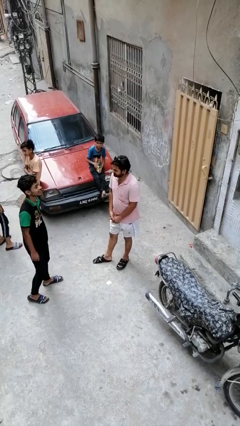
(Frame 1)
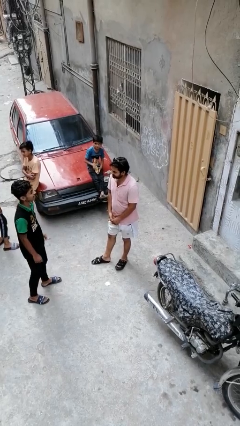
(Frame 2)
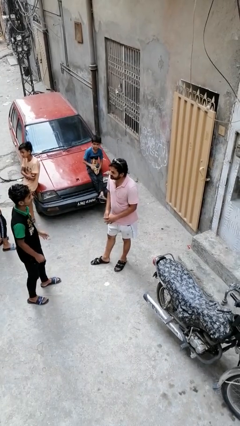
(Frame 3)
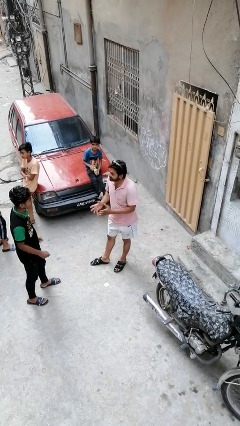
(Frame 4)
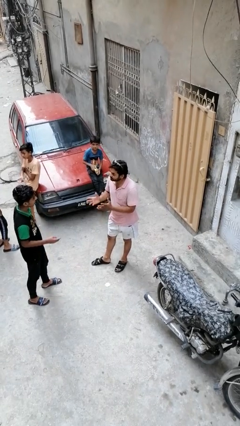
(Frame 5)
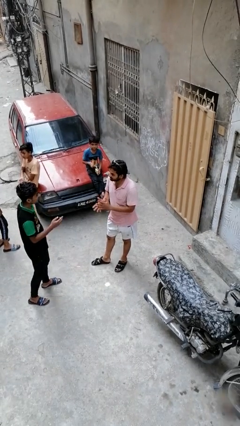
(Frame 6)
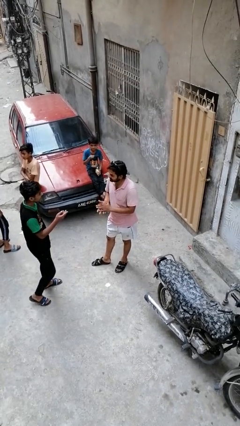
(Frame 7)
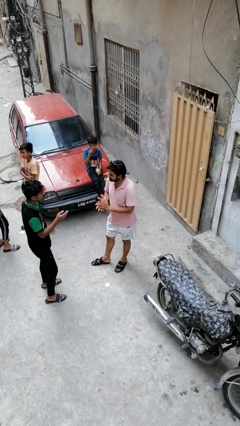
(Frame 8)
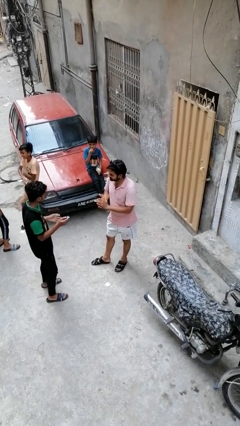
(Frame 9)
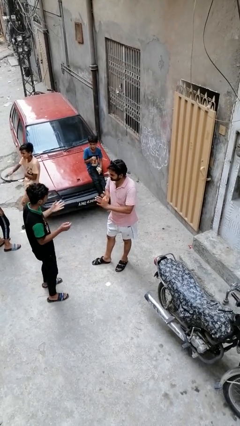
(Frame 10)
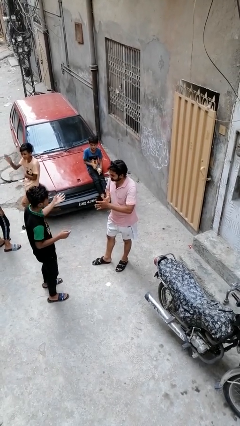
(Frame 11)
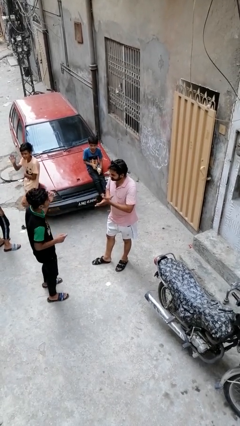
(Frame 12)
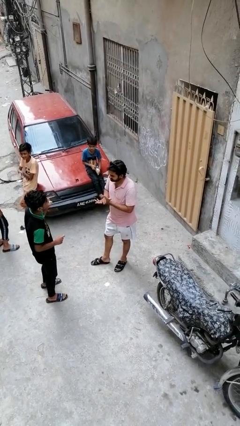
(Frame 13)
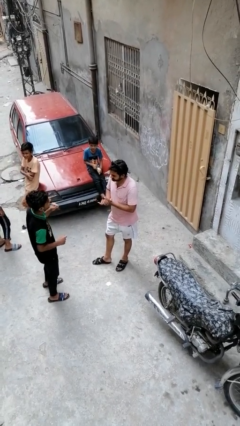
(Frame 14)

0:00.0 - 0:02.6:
person talks to person

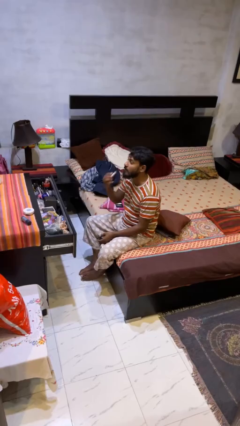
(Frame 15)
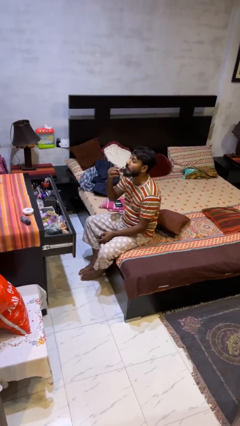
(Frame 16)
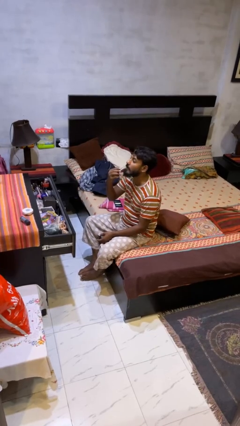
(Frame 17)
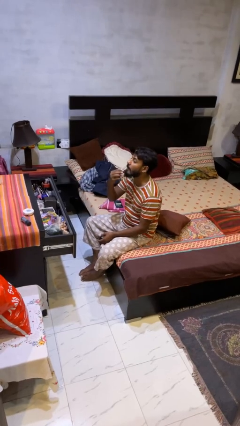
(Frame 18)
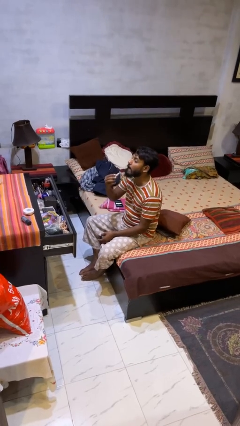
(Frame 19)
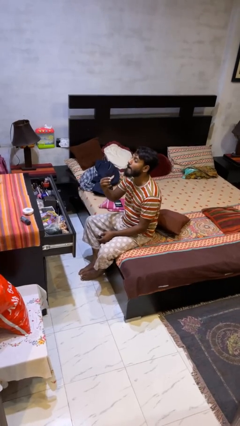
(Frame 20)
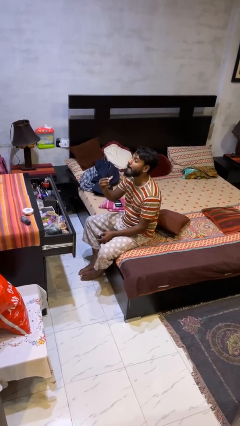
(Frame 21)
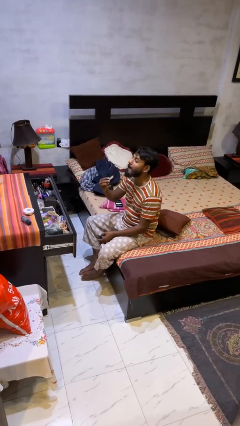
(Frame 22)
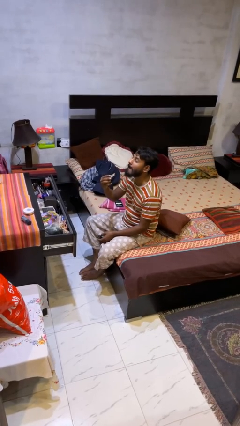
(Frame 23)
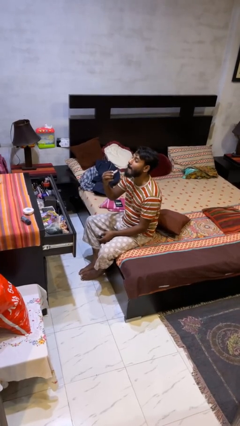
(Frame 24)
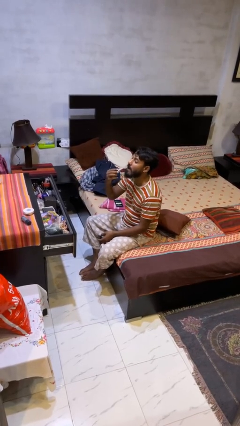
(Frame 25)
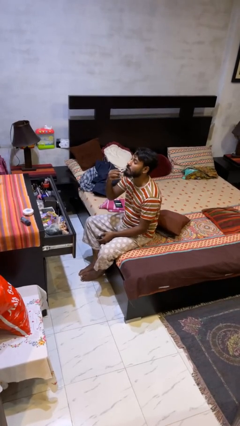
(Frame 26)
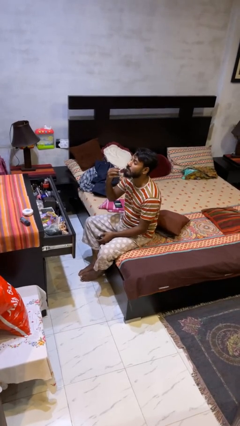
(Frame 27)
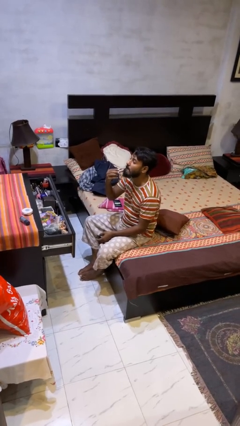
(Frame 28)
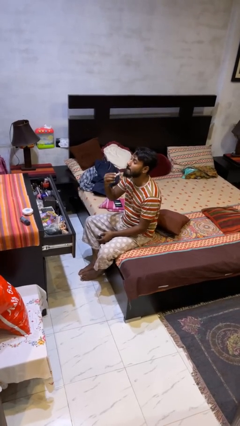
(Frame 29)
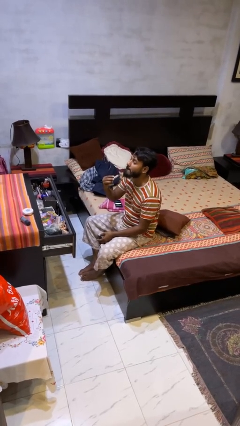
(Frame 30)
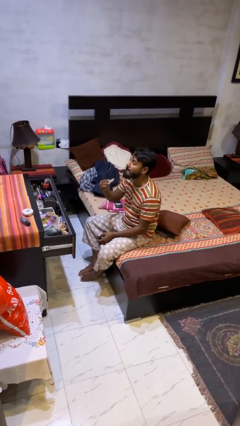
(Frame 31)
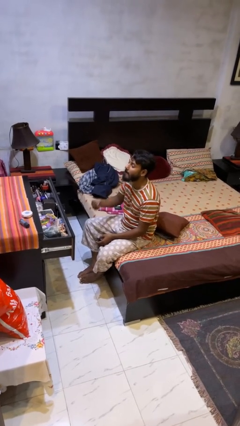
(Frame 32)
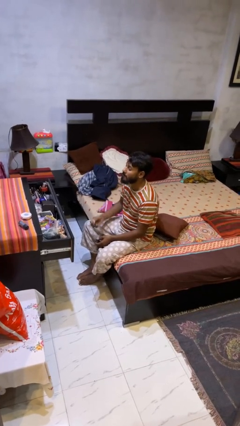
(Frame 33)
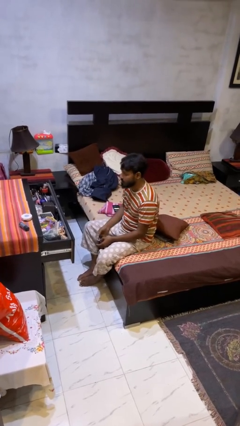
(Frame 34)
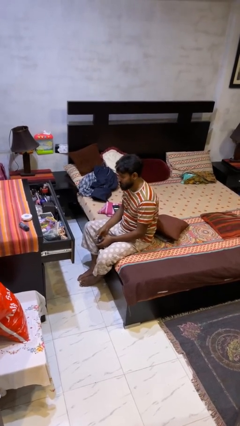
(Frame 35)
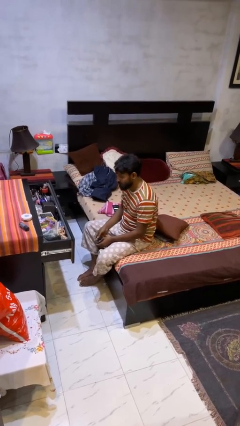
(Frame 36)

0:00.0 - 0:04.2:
person applies lip makeup

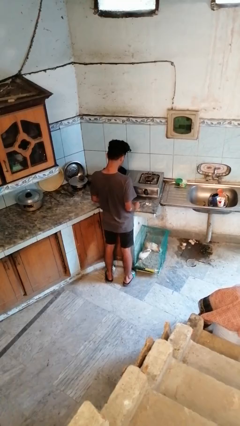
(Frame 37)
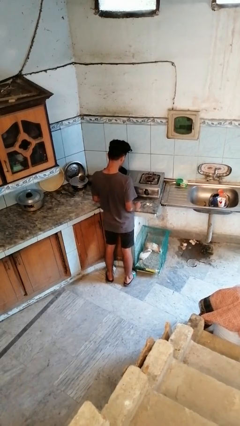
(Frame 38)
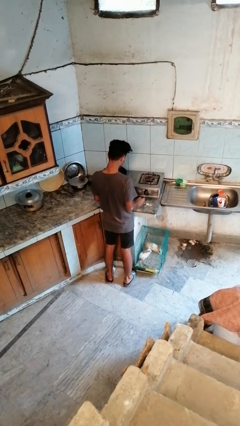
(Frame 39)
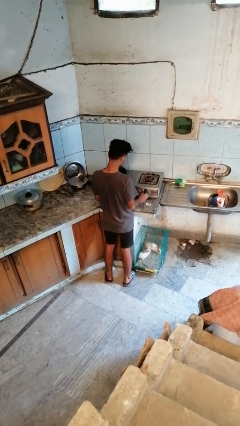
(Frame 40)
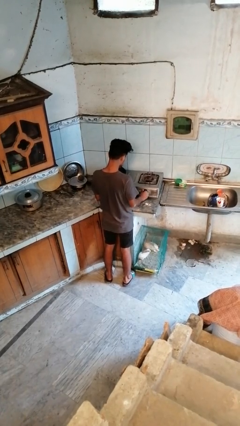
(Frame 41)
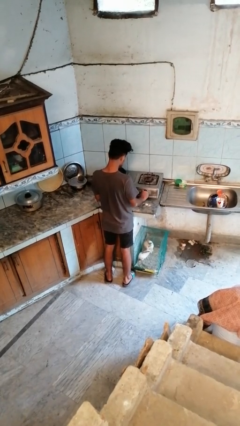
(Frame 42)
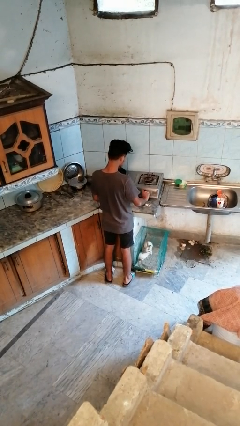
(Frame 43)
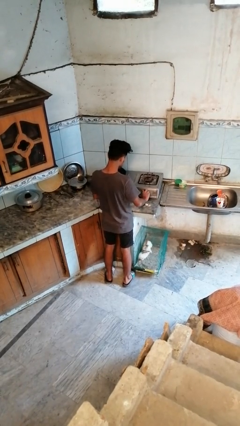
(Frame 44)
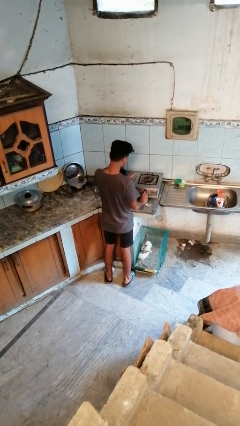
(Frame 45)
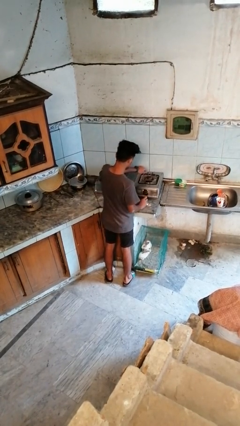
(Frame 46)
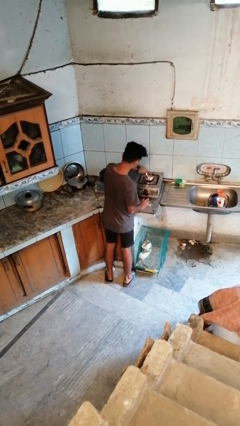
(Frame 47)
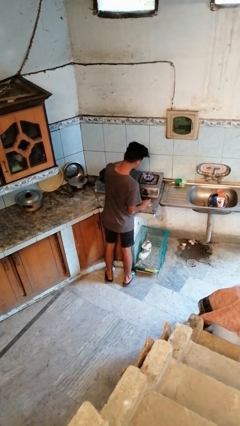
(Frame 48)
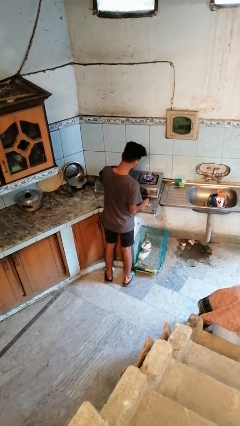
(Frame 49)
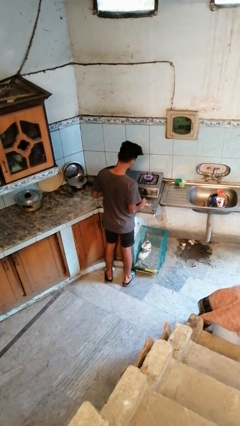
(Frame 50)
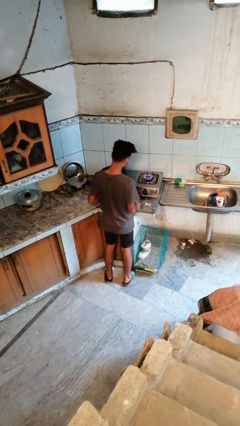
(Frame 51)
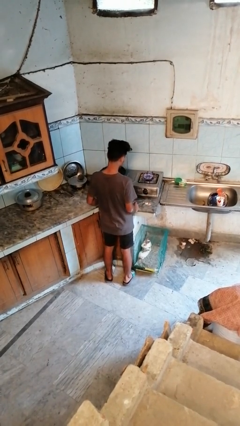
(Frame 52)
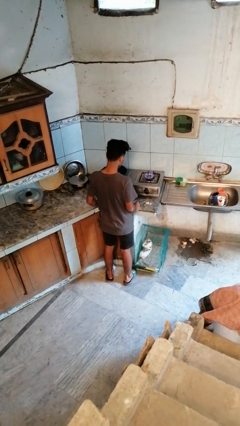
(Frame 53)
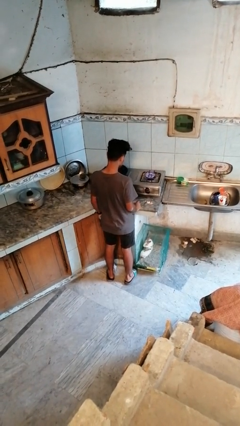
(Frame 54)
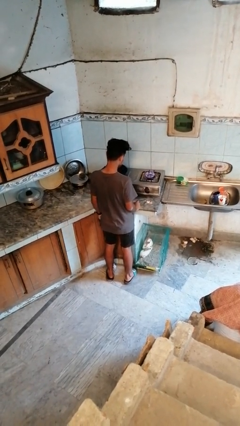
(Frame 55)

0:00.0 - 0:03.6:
person turns on stovetop

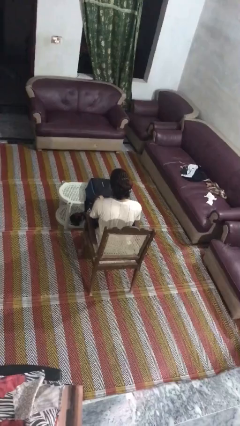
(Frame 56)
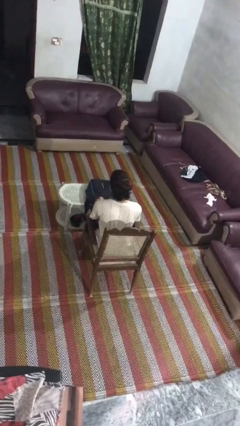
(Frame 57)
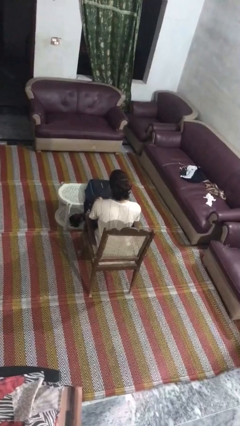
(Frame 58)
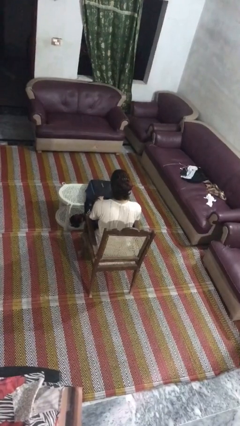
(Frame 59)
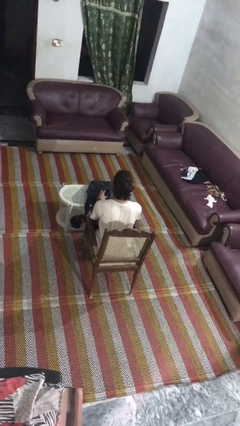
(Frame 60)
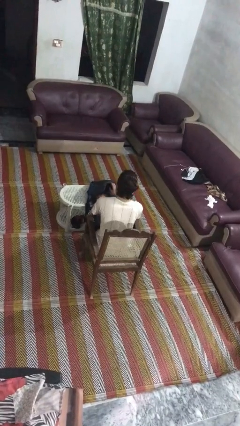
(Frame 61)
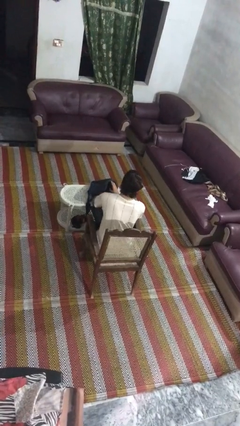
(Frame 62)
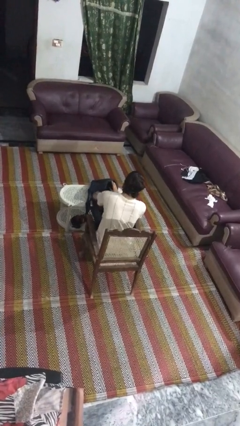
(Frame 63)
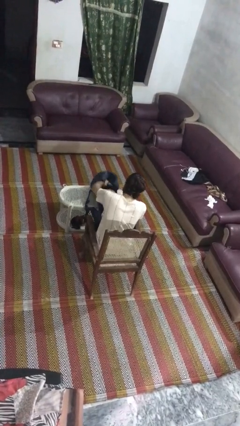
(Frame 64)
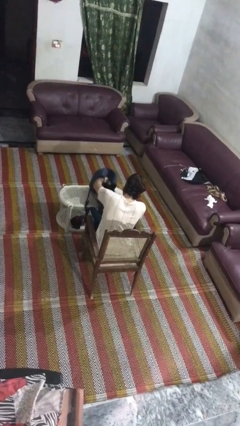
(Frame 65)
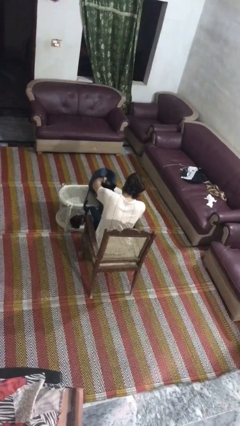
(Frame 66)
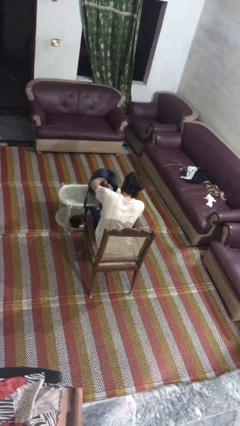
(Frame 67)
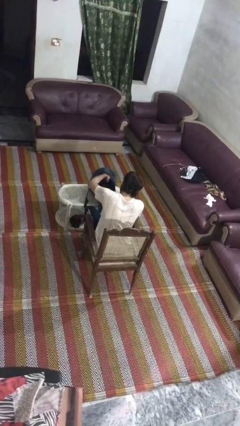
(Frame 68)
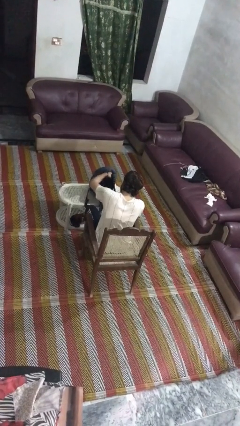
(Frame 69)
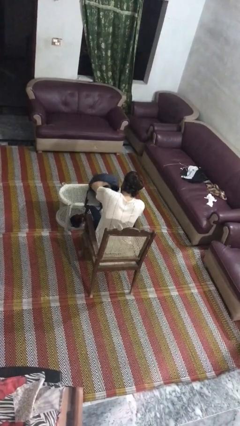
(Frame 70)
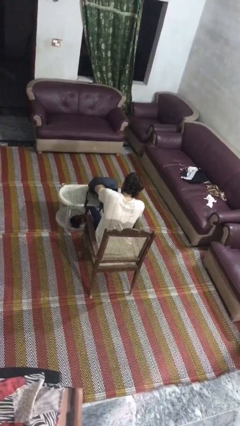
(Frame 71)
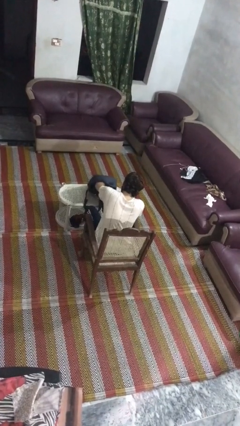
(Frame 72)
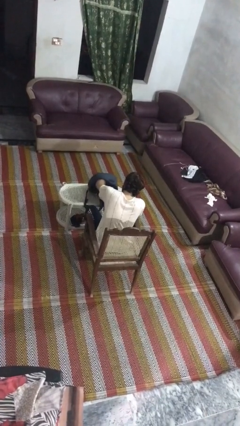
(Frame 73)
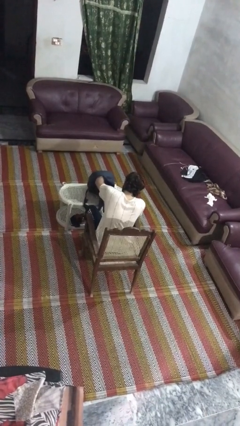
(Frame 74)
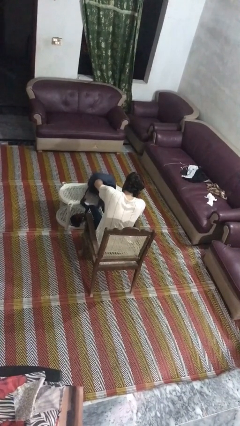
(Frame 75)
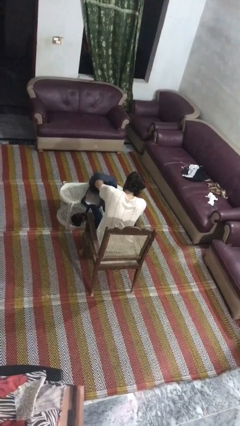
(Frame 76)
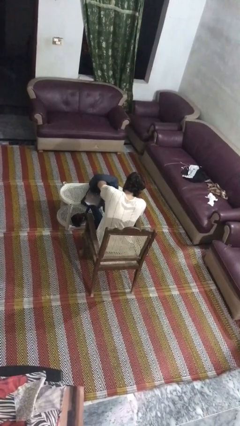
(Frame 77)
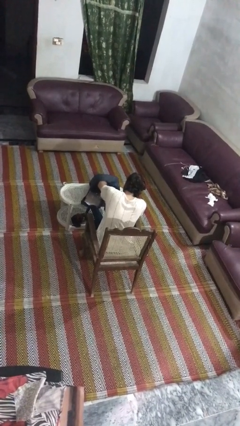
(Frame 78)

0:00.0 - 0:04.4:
person searches in backpack

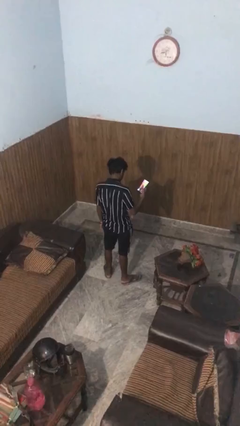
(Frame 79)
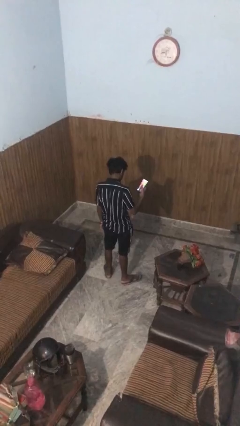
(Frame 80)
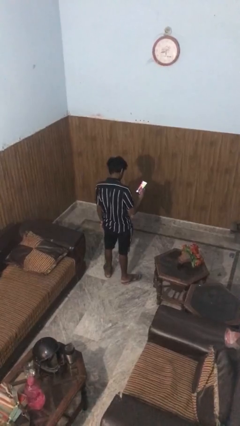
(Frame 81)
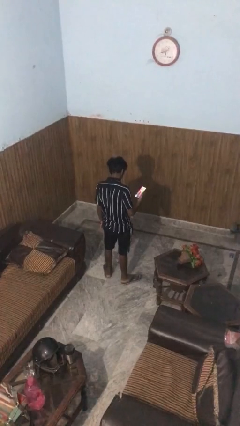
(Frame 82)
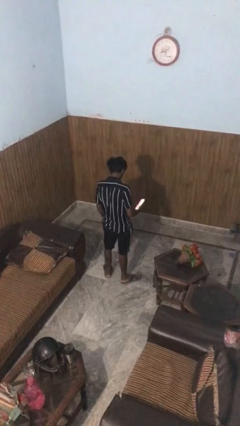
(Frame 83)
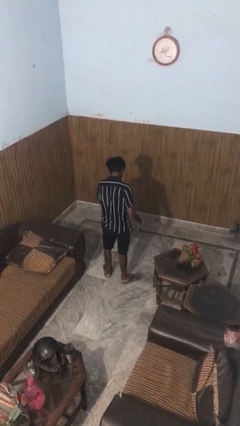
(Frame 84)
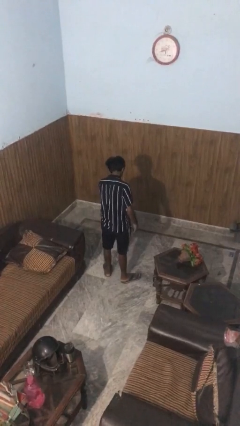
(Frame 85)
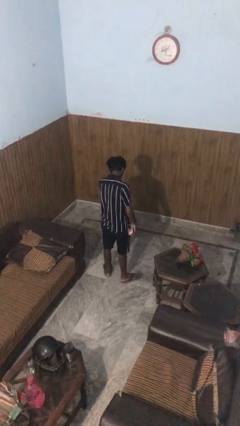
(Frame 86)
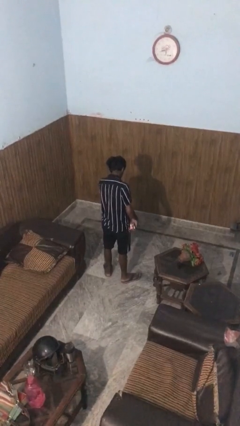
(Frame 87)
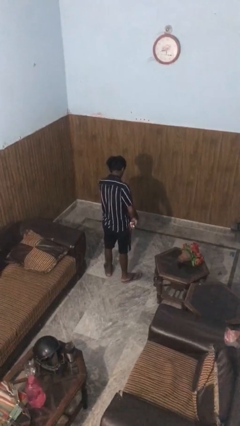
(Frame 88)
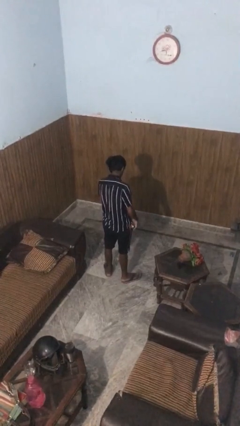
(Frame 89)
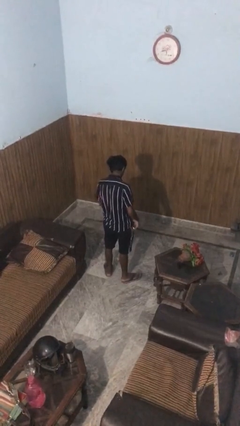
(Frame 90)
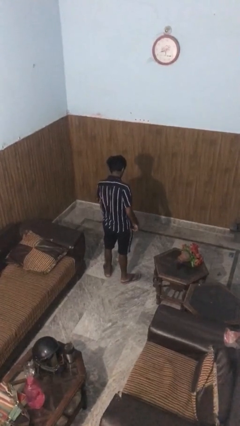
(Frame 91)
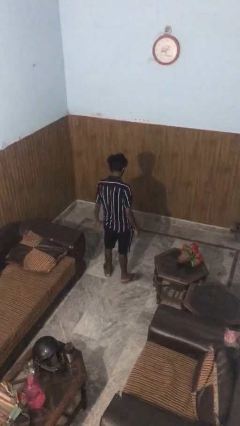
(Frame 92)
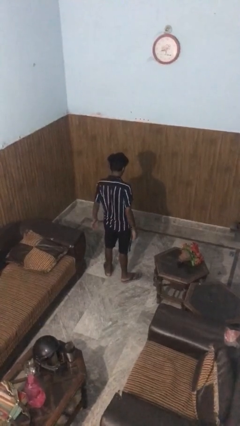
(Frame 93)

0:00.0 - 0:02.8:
person puts phone into pocket
